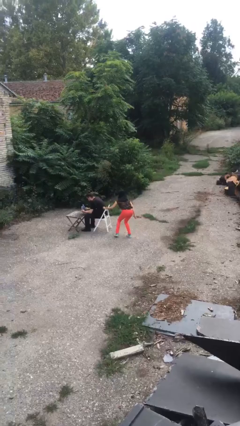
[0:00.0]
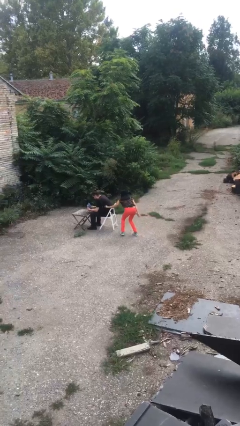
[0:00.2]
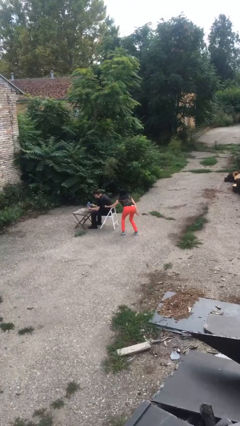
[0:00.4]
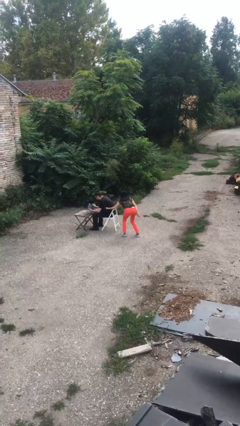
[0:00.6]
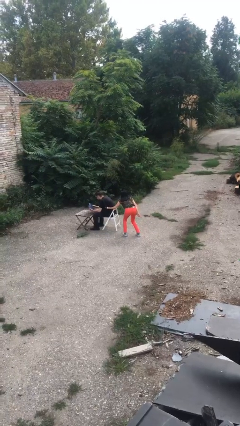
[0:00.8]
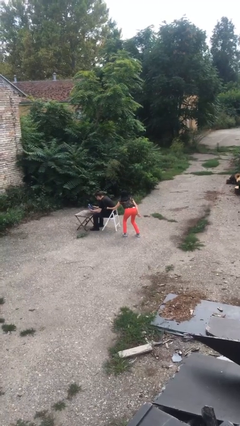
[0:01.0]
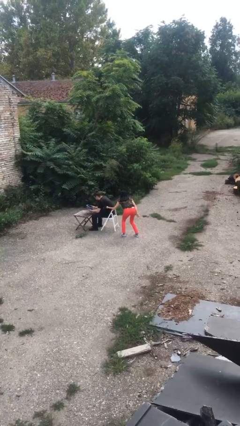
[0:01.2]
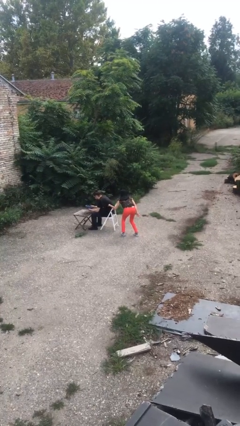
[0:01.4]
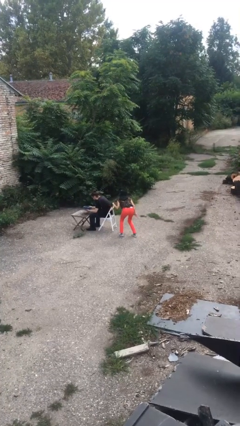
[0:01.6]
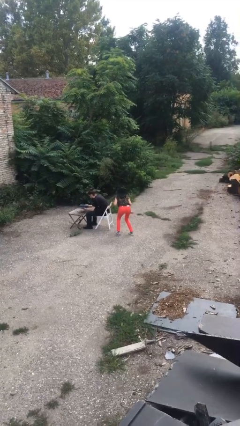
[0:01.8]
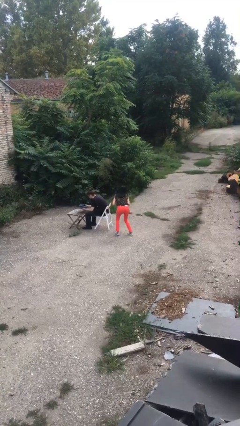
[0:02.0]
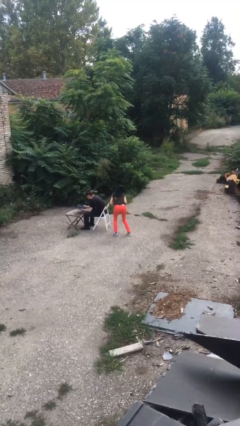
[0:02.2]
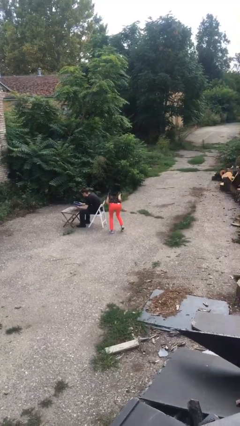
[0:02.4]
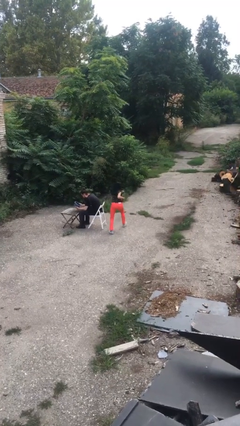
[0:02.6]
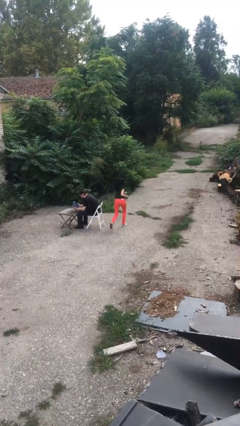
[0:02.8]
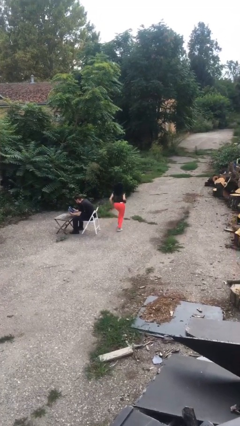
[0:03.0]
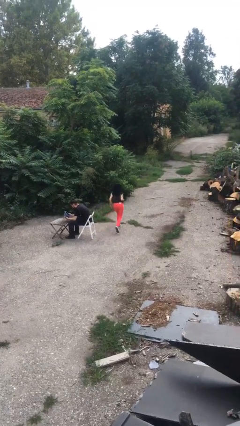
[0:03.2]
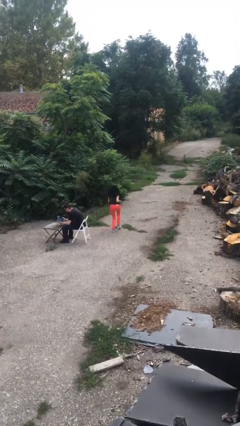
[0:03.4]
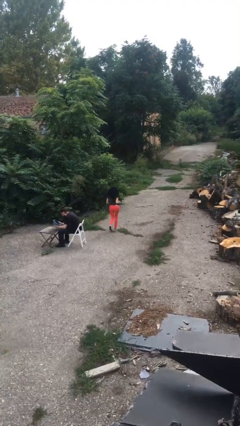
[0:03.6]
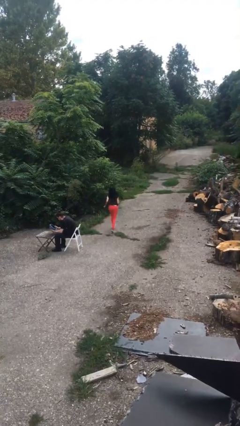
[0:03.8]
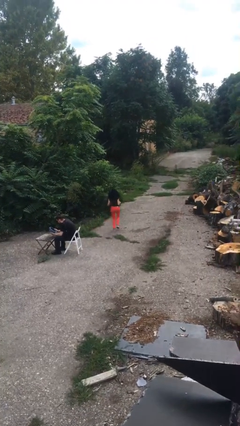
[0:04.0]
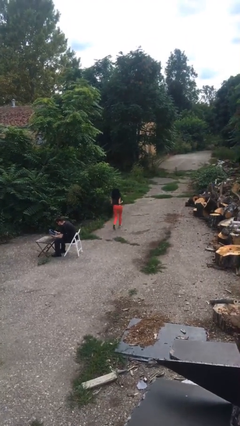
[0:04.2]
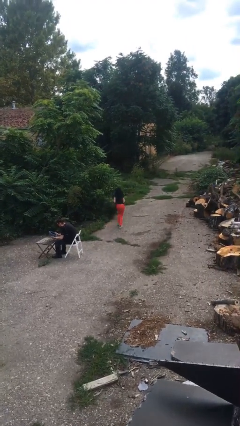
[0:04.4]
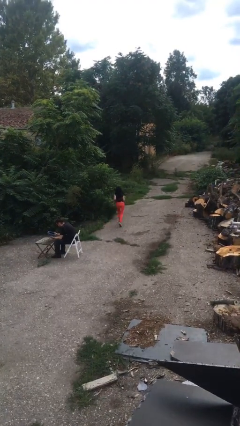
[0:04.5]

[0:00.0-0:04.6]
person steals object from person

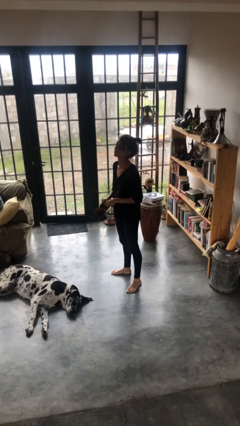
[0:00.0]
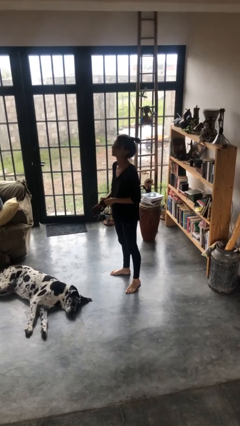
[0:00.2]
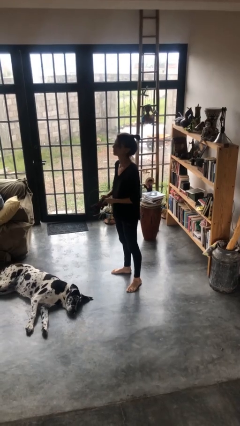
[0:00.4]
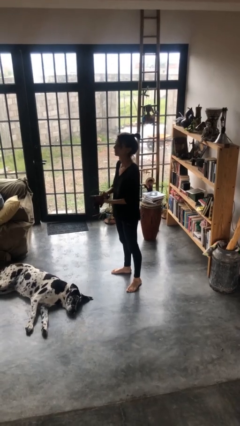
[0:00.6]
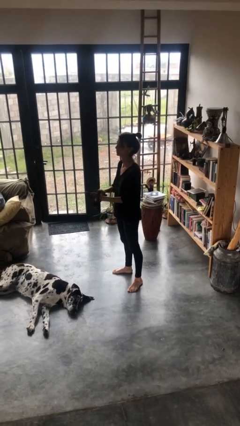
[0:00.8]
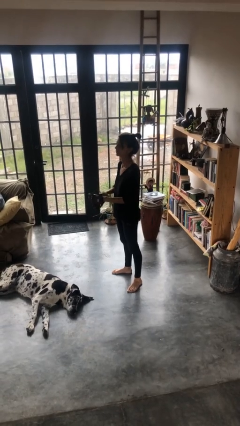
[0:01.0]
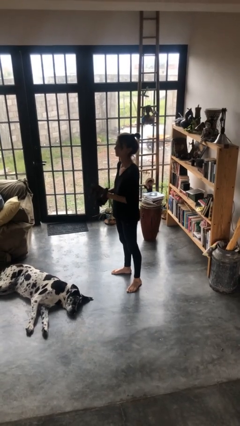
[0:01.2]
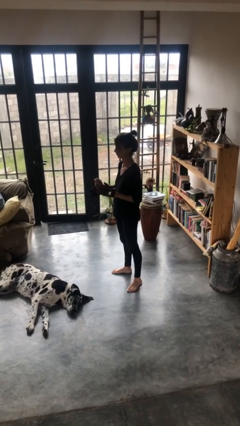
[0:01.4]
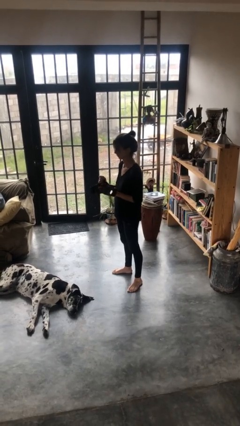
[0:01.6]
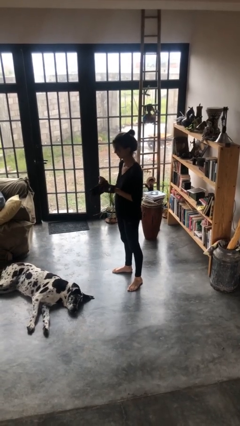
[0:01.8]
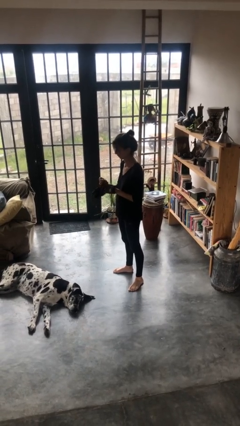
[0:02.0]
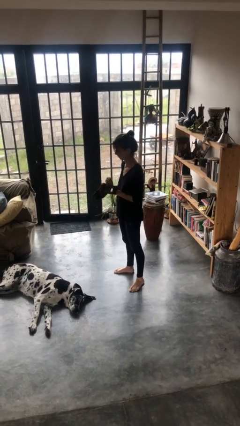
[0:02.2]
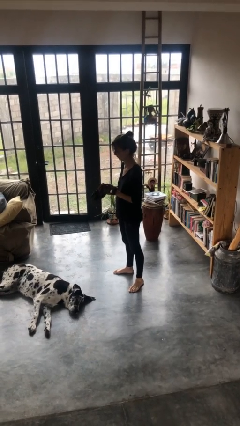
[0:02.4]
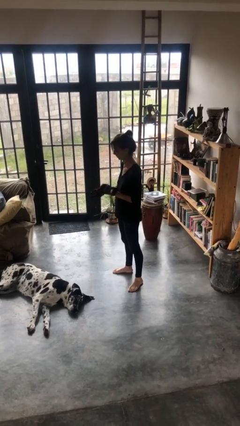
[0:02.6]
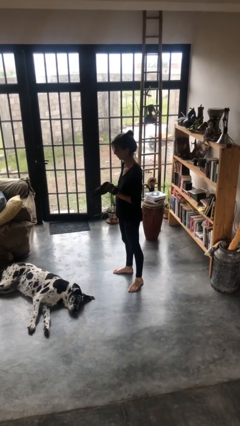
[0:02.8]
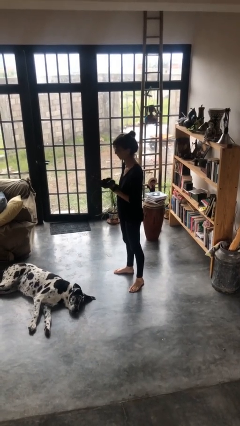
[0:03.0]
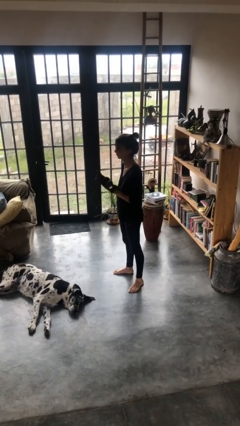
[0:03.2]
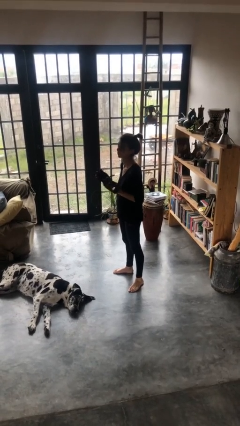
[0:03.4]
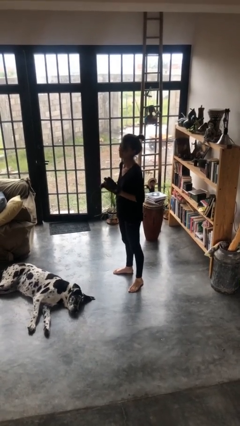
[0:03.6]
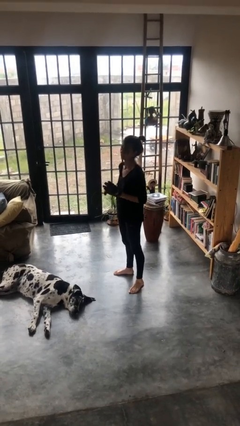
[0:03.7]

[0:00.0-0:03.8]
person puts on gloves

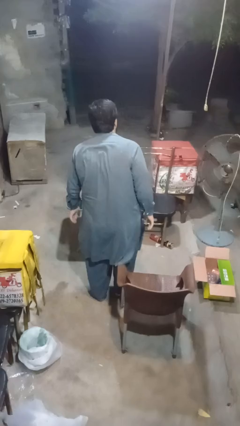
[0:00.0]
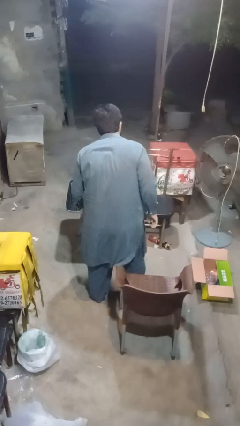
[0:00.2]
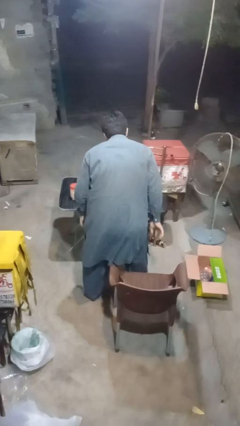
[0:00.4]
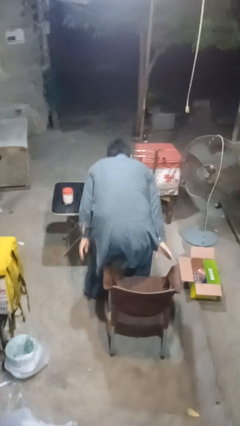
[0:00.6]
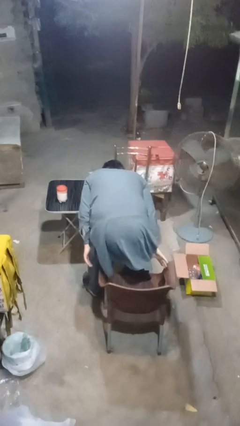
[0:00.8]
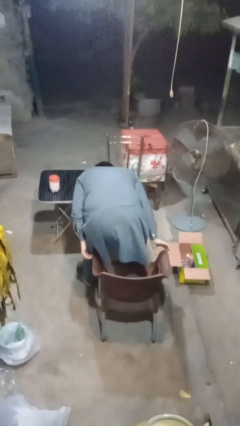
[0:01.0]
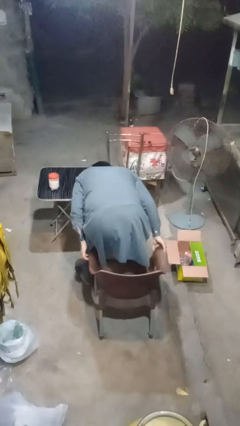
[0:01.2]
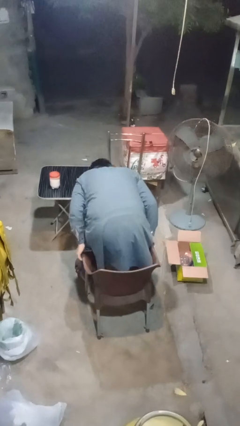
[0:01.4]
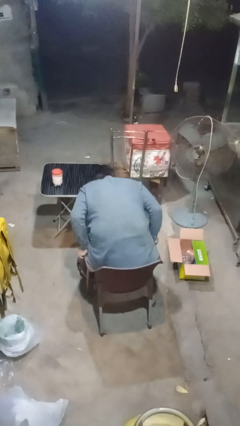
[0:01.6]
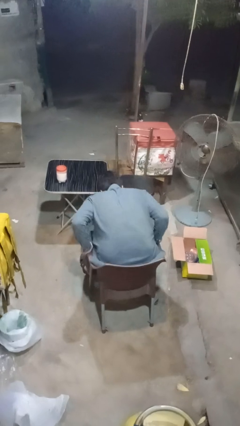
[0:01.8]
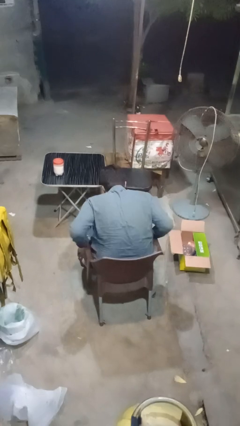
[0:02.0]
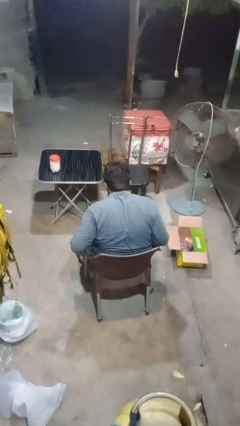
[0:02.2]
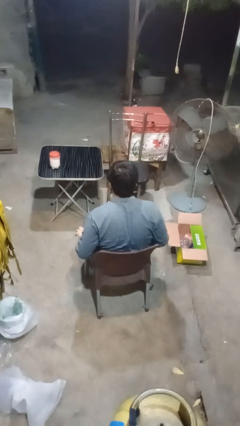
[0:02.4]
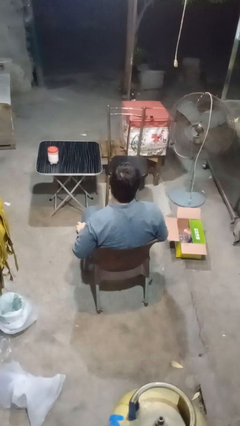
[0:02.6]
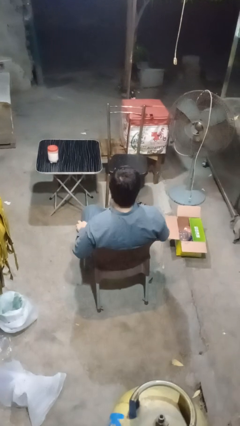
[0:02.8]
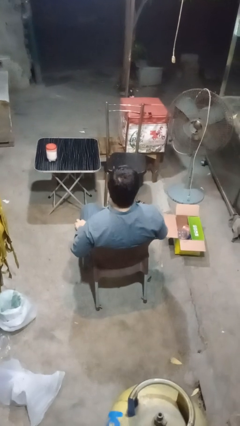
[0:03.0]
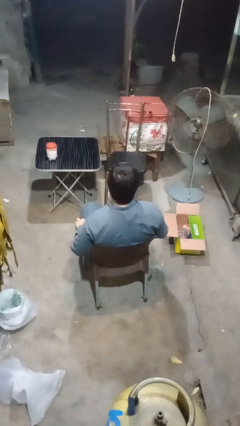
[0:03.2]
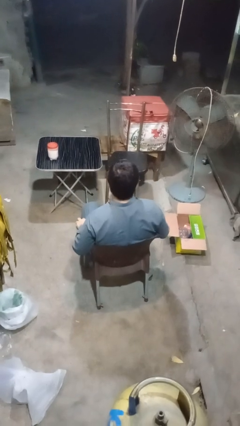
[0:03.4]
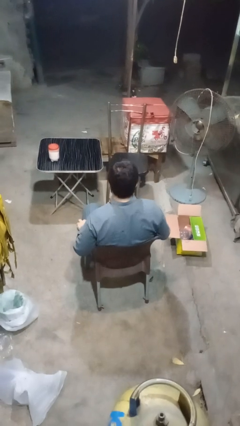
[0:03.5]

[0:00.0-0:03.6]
person sits down

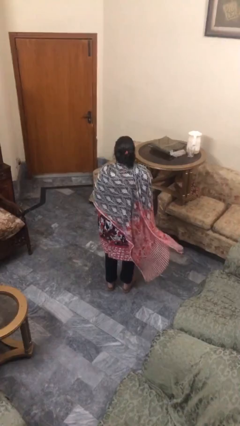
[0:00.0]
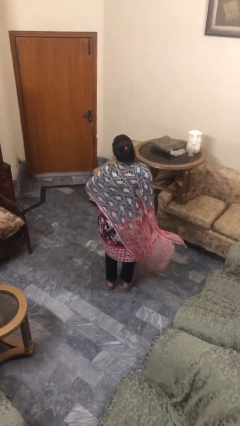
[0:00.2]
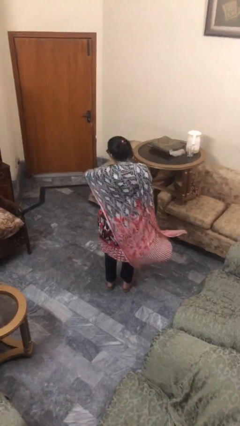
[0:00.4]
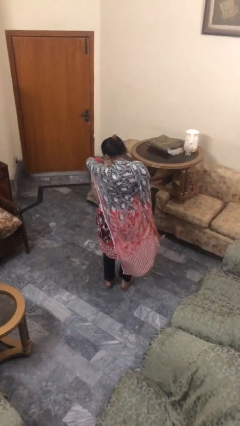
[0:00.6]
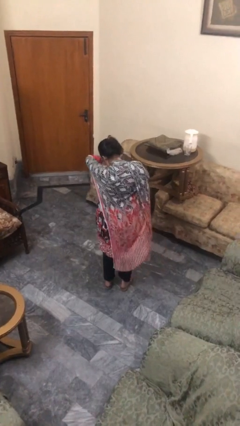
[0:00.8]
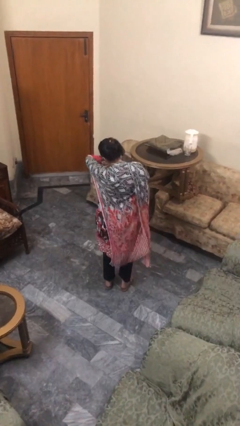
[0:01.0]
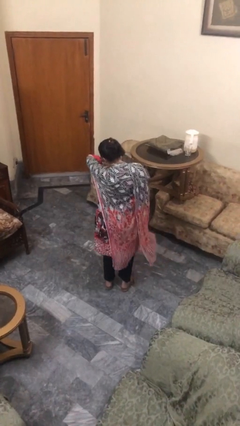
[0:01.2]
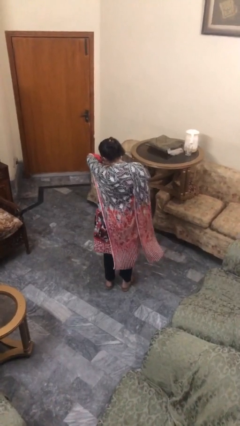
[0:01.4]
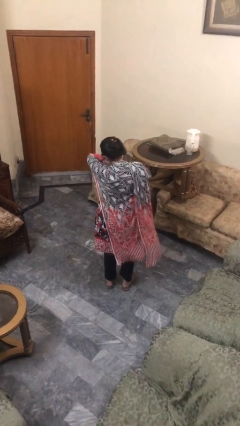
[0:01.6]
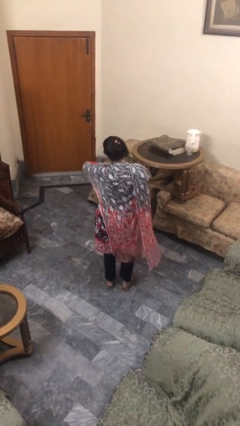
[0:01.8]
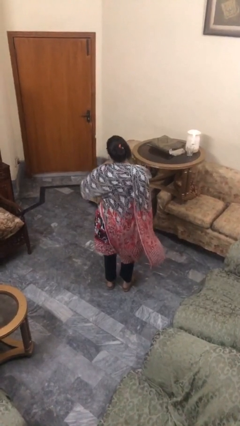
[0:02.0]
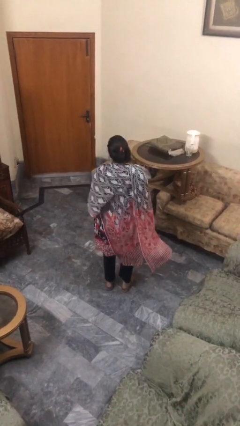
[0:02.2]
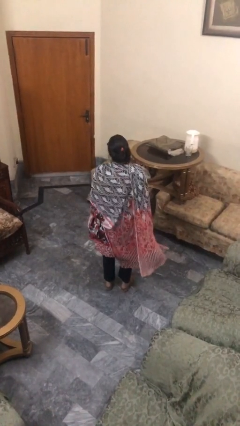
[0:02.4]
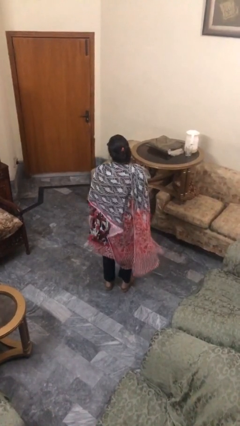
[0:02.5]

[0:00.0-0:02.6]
person sneezes into arm
